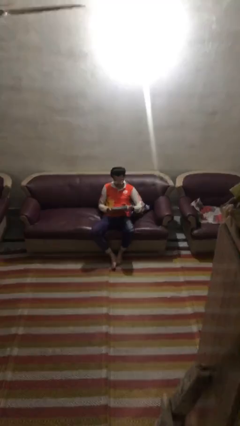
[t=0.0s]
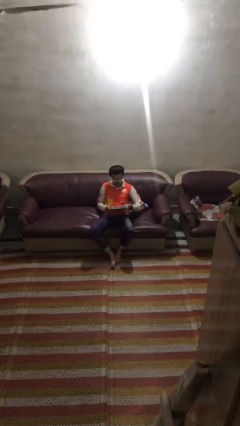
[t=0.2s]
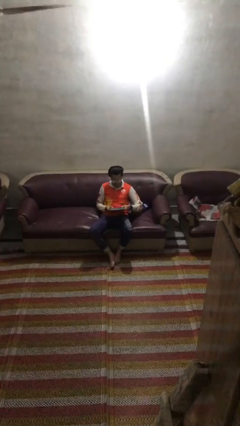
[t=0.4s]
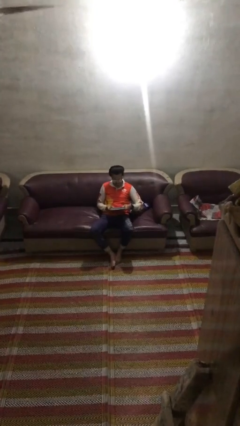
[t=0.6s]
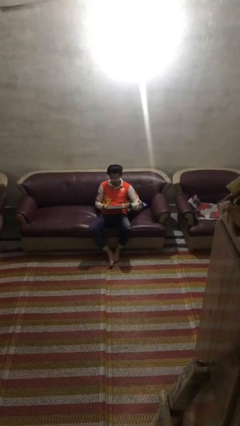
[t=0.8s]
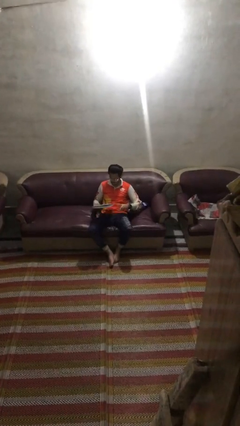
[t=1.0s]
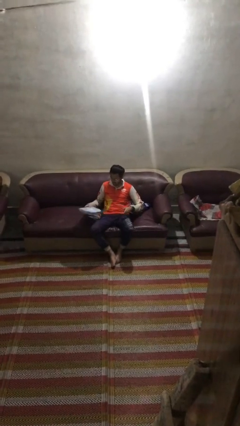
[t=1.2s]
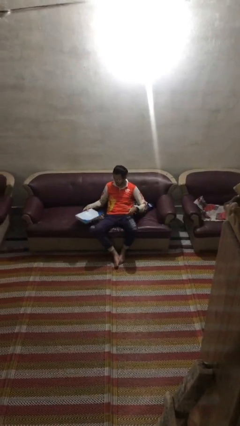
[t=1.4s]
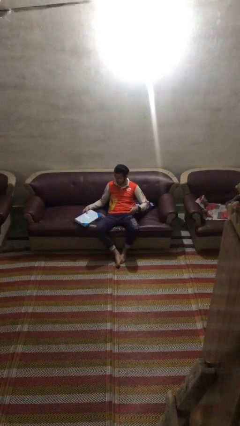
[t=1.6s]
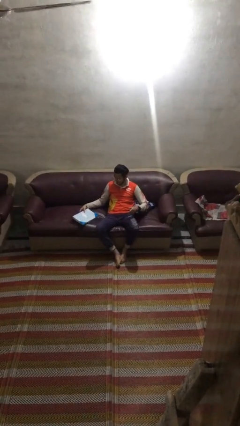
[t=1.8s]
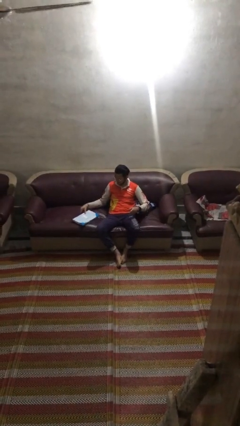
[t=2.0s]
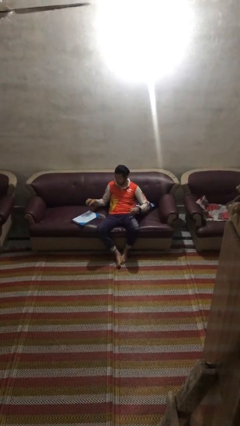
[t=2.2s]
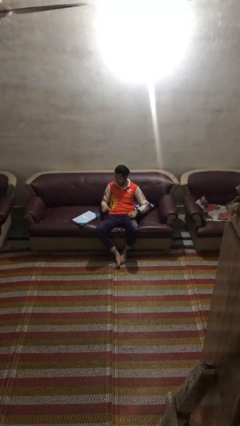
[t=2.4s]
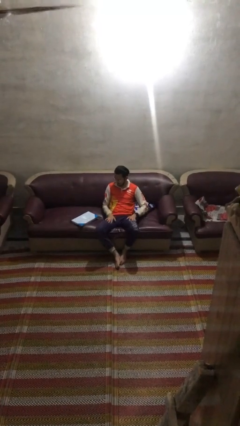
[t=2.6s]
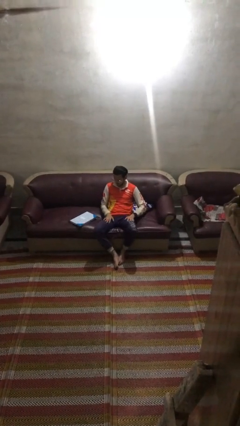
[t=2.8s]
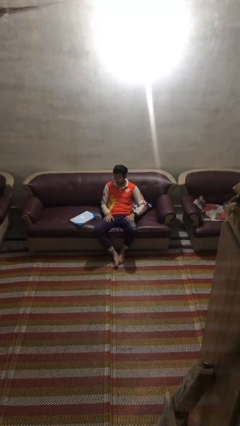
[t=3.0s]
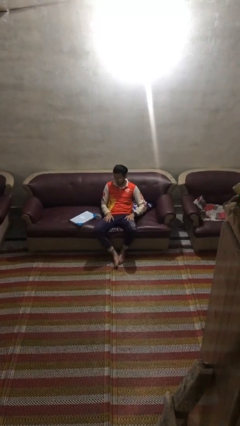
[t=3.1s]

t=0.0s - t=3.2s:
person puts down object on couch

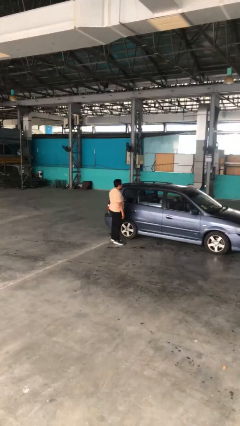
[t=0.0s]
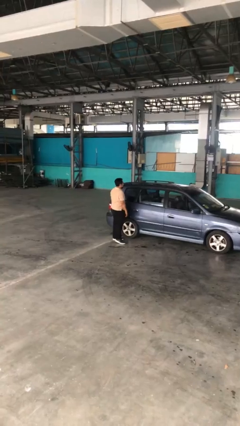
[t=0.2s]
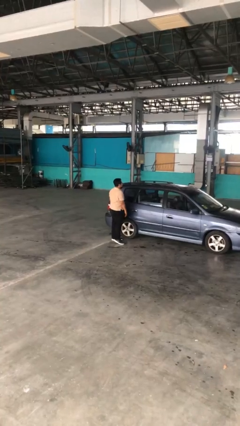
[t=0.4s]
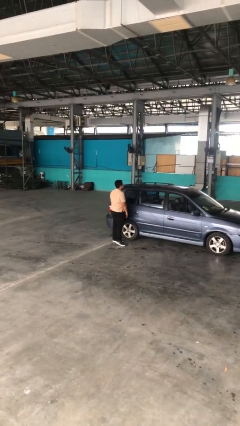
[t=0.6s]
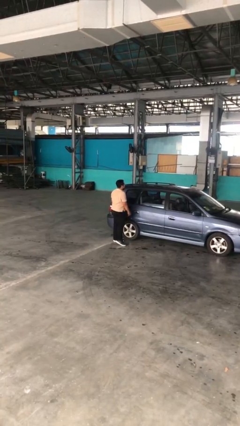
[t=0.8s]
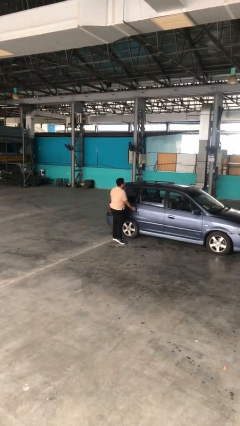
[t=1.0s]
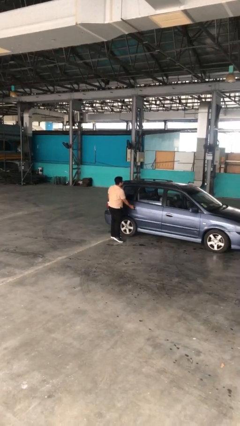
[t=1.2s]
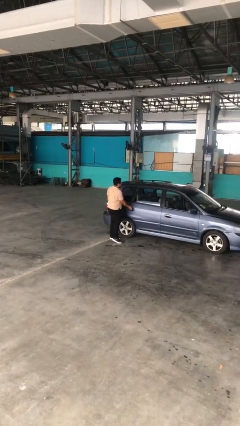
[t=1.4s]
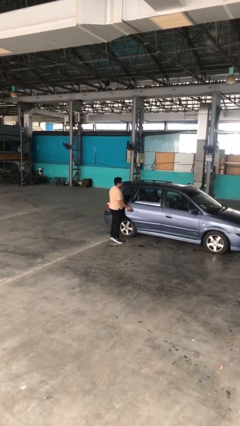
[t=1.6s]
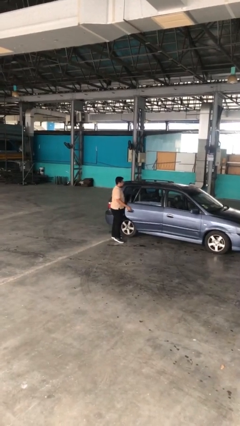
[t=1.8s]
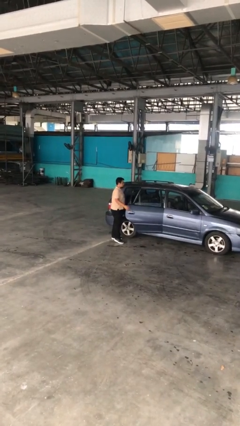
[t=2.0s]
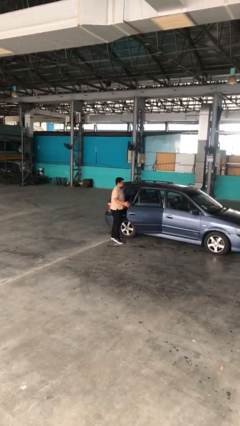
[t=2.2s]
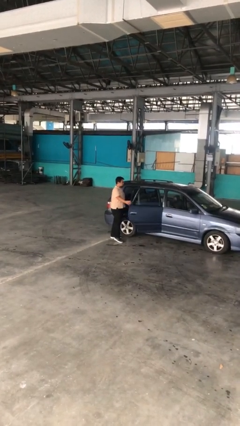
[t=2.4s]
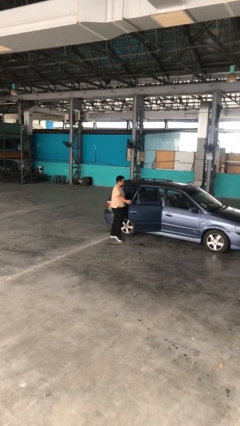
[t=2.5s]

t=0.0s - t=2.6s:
person opens car door

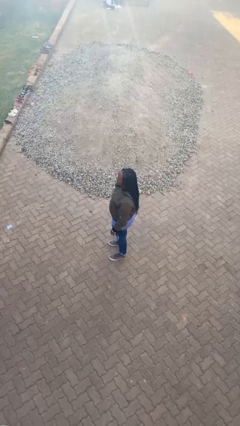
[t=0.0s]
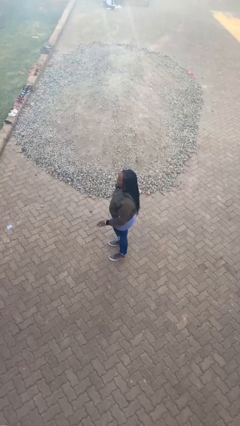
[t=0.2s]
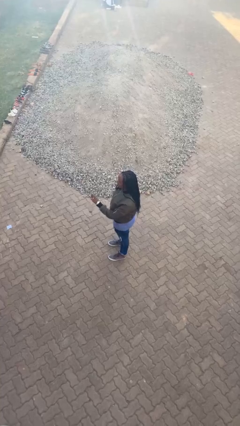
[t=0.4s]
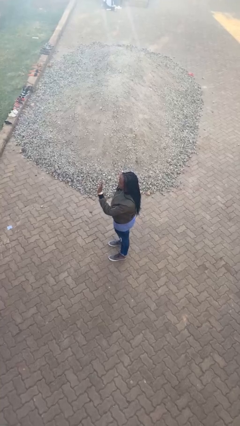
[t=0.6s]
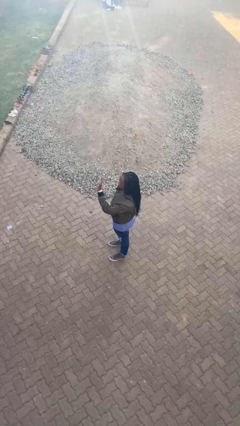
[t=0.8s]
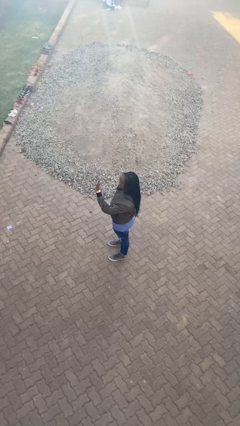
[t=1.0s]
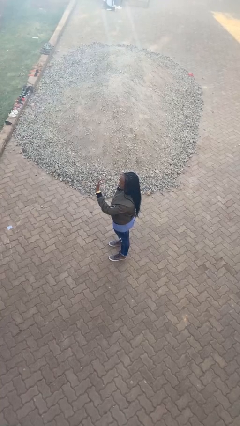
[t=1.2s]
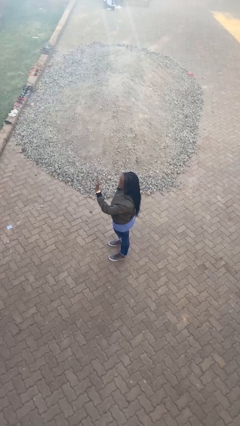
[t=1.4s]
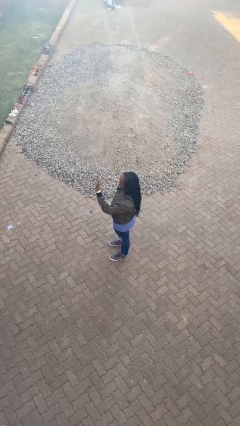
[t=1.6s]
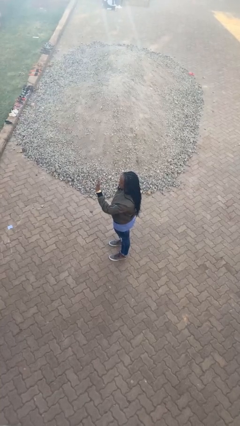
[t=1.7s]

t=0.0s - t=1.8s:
person gestures stop

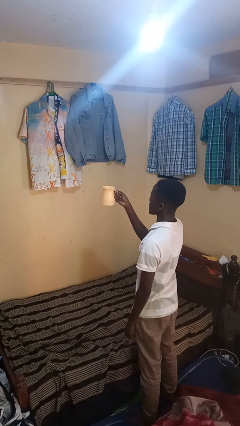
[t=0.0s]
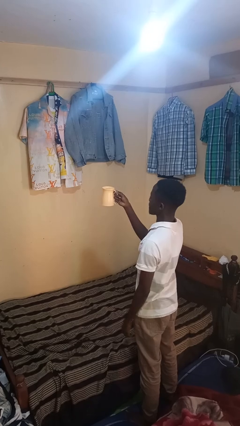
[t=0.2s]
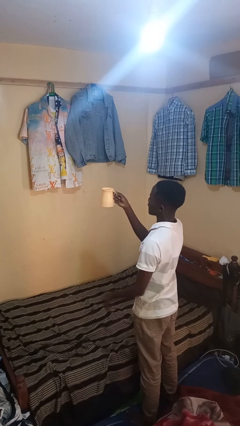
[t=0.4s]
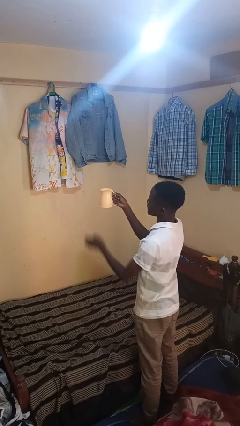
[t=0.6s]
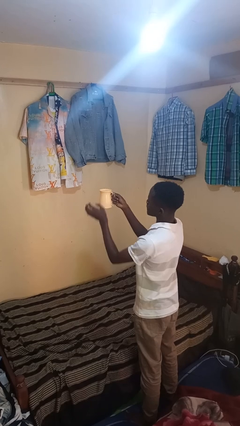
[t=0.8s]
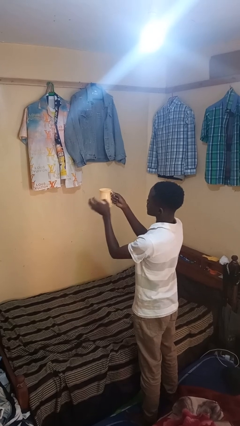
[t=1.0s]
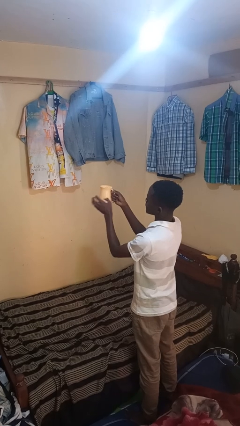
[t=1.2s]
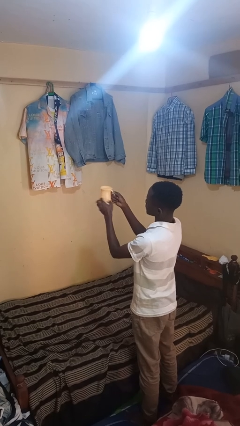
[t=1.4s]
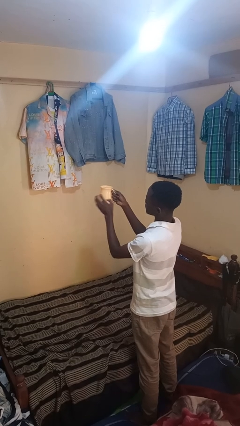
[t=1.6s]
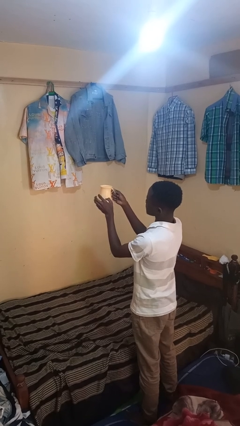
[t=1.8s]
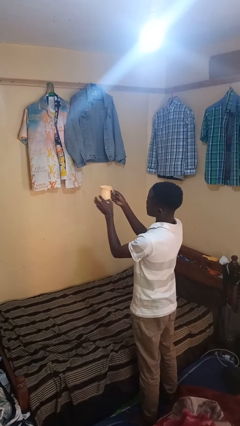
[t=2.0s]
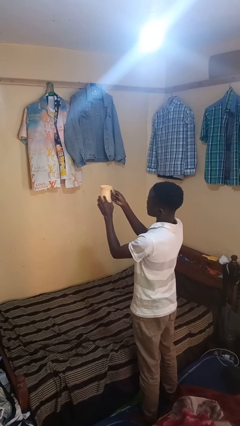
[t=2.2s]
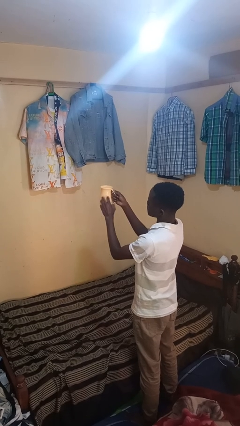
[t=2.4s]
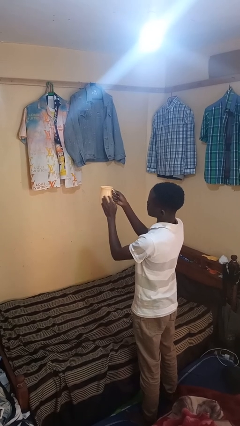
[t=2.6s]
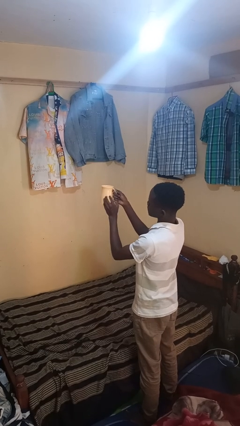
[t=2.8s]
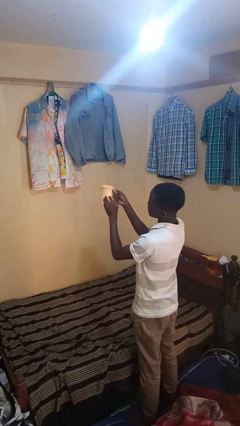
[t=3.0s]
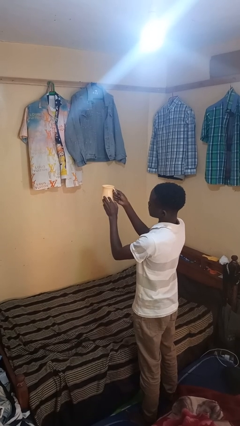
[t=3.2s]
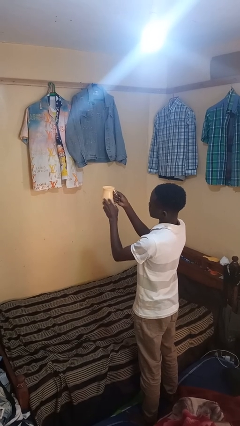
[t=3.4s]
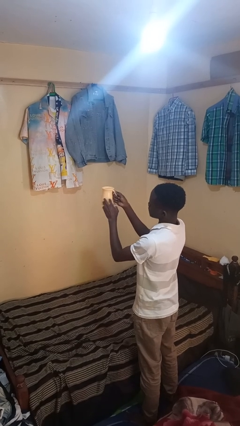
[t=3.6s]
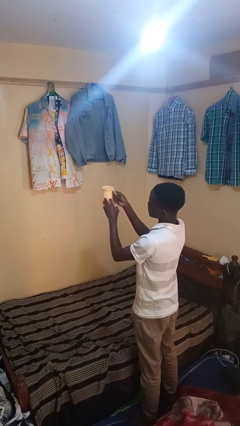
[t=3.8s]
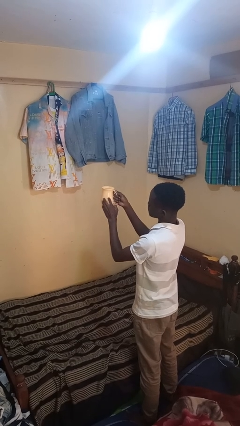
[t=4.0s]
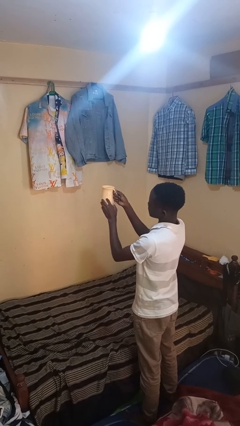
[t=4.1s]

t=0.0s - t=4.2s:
person taps object with finger

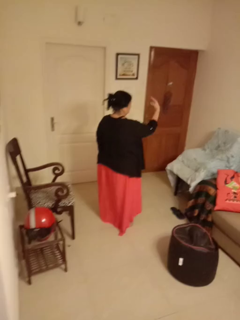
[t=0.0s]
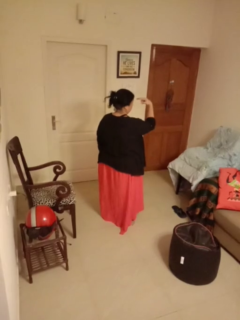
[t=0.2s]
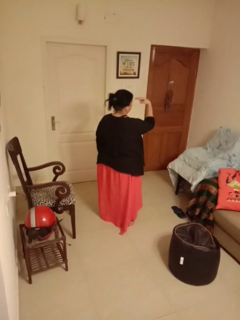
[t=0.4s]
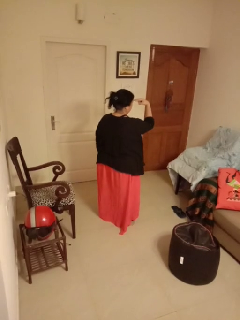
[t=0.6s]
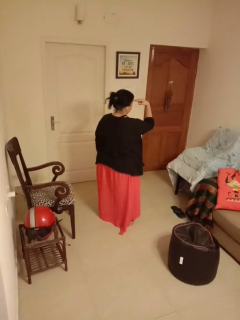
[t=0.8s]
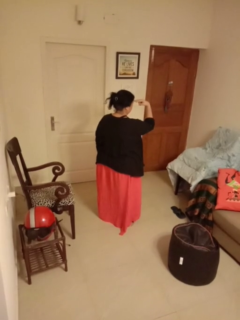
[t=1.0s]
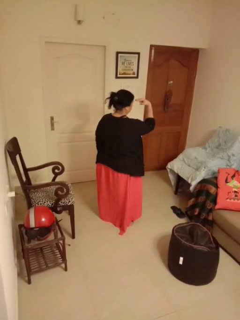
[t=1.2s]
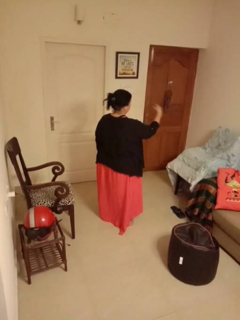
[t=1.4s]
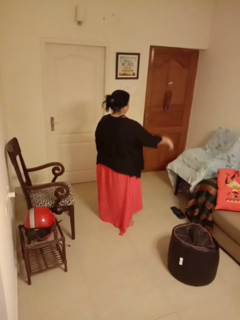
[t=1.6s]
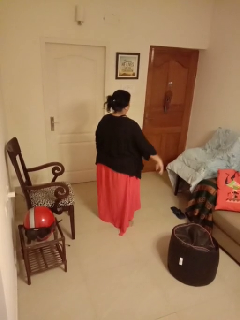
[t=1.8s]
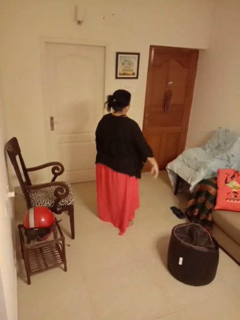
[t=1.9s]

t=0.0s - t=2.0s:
person gestures watch closely

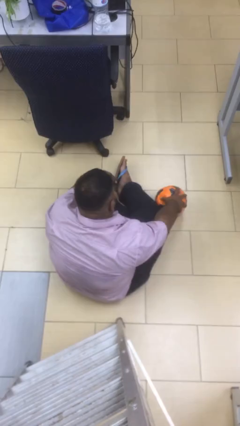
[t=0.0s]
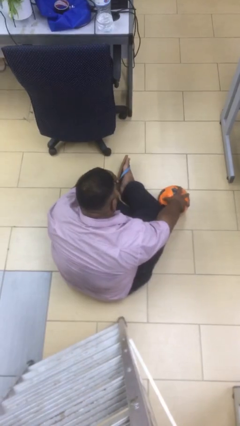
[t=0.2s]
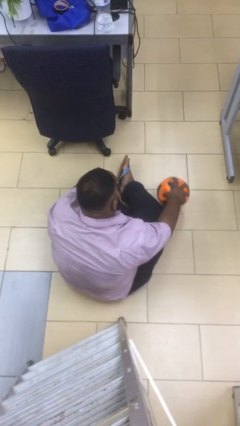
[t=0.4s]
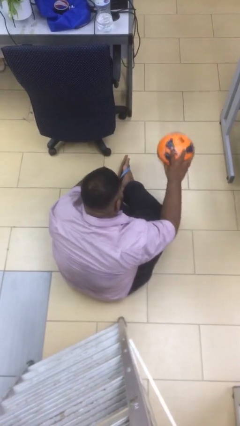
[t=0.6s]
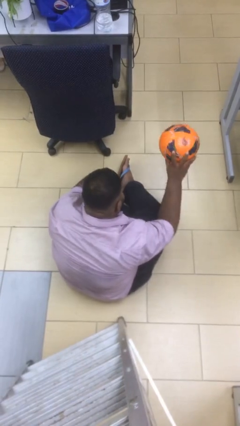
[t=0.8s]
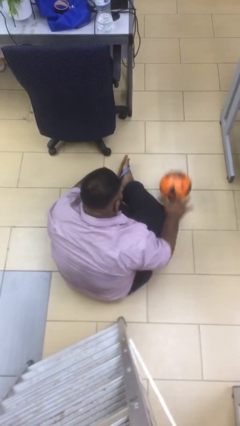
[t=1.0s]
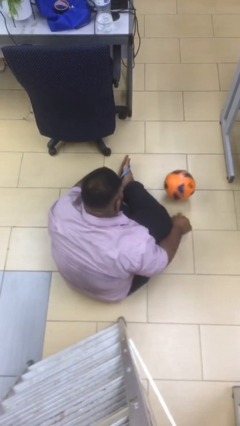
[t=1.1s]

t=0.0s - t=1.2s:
person bounces ball on floor

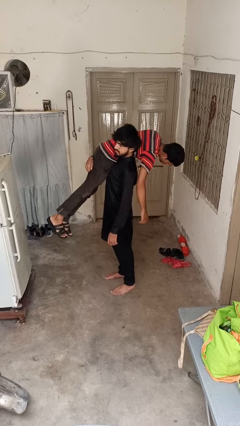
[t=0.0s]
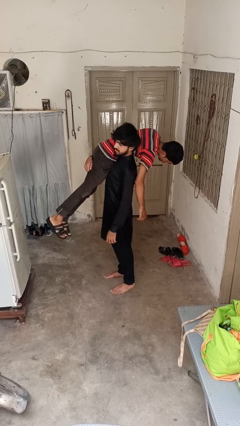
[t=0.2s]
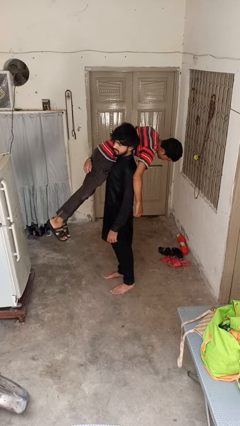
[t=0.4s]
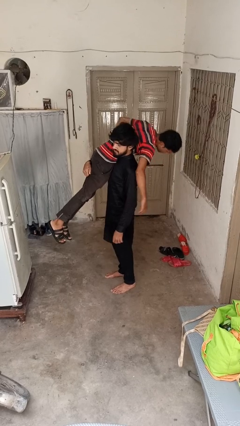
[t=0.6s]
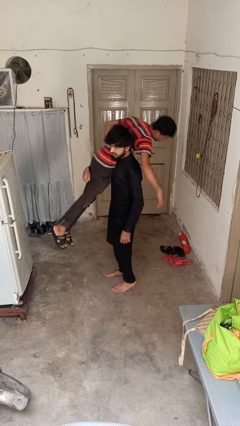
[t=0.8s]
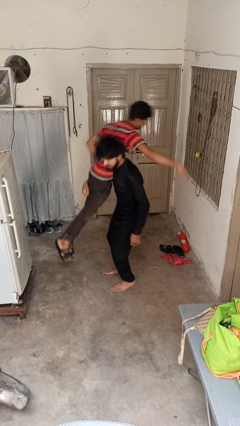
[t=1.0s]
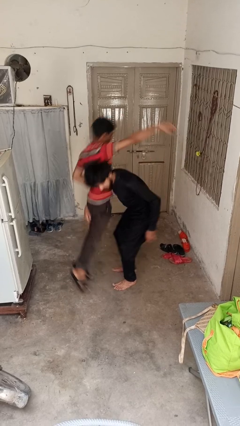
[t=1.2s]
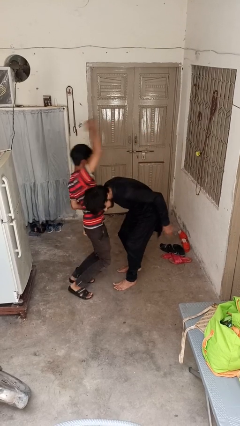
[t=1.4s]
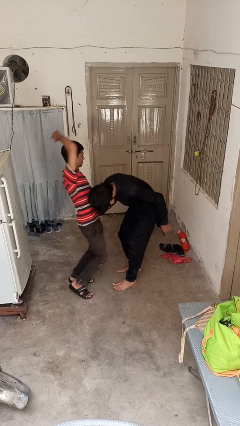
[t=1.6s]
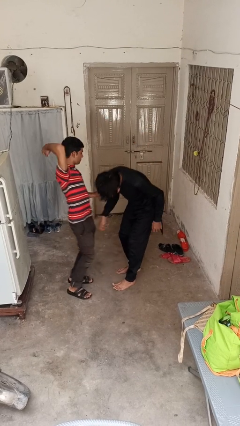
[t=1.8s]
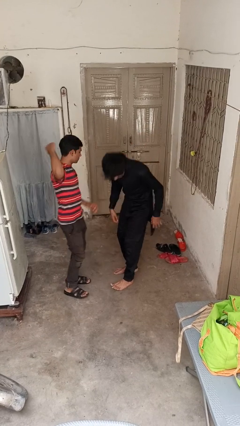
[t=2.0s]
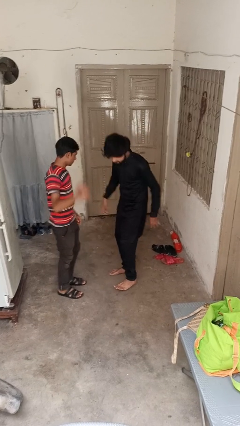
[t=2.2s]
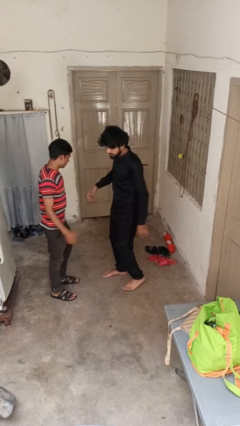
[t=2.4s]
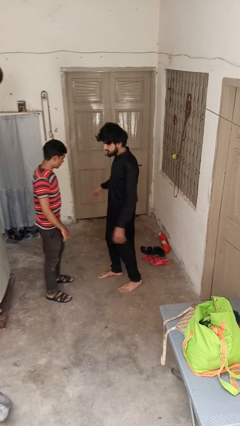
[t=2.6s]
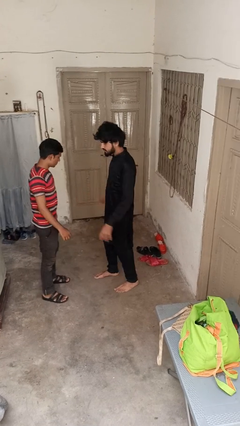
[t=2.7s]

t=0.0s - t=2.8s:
person puts down person
